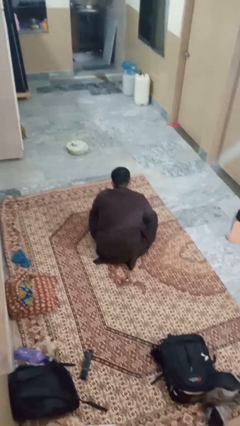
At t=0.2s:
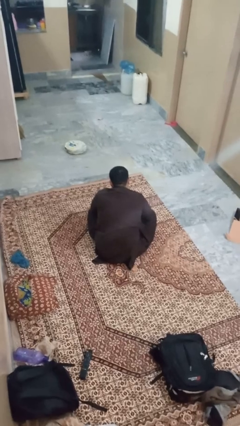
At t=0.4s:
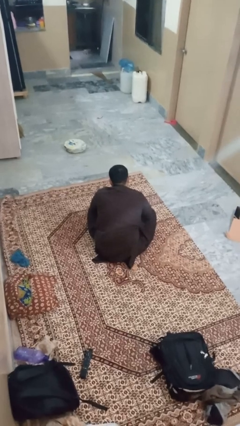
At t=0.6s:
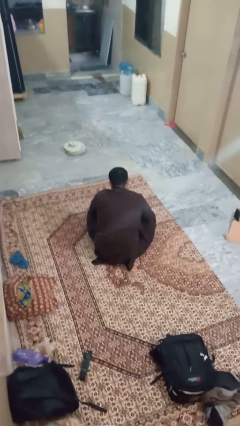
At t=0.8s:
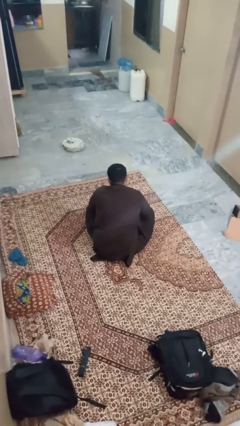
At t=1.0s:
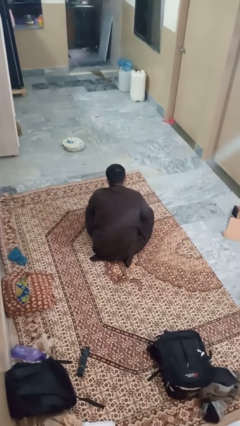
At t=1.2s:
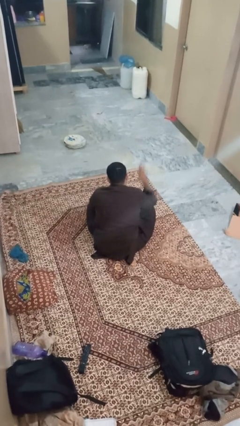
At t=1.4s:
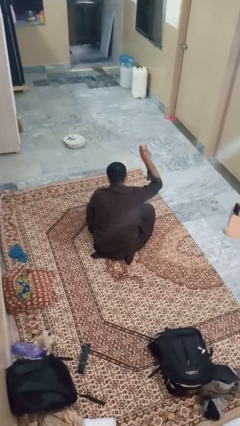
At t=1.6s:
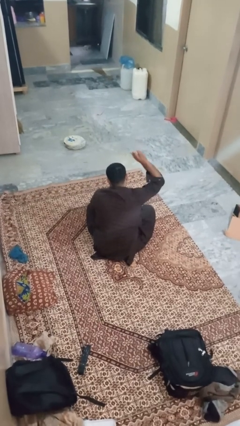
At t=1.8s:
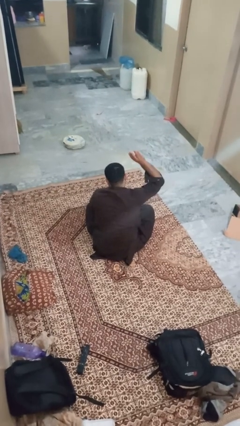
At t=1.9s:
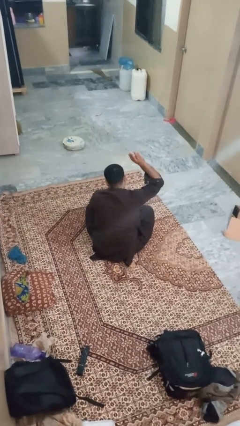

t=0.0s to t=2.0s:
person gestures number three

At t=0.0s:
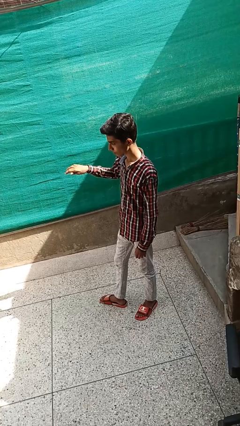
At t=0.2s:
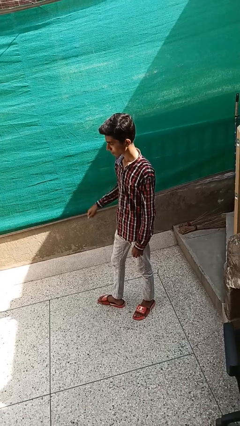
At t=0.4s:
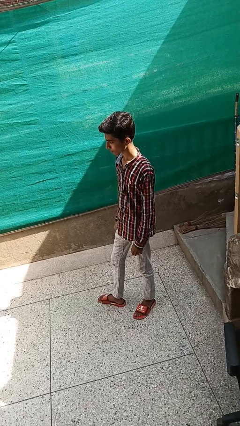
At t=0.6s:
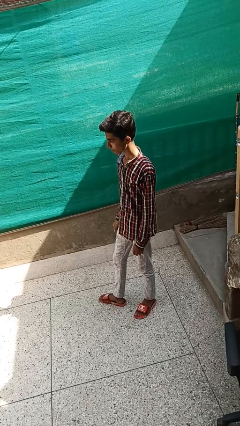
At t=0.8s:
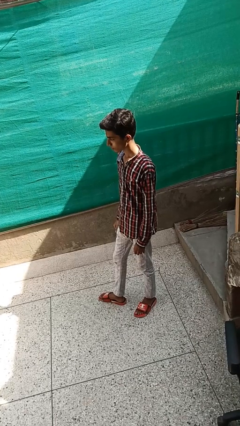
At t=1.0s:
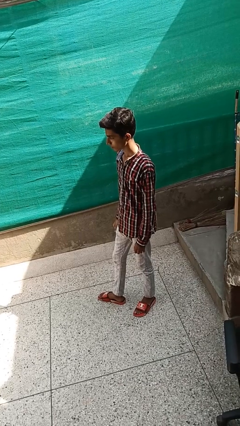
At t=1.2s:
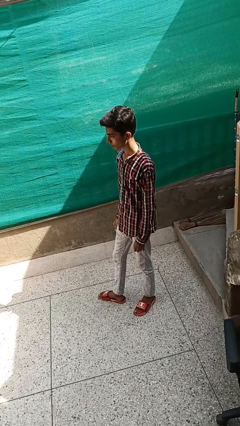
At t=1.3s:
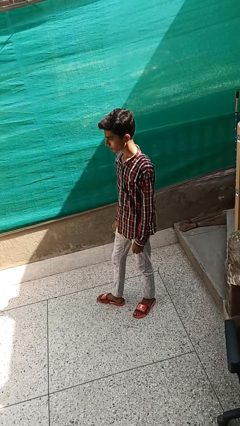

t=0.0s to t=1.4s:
person gestures swipe left

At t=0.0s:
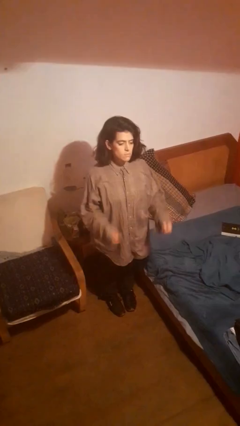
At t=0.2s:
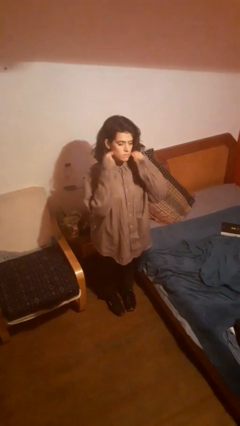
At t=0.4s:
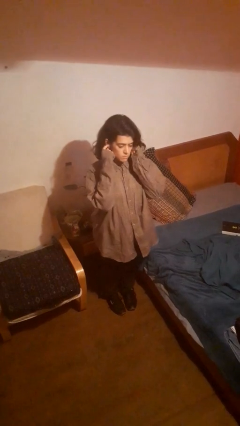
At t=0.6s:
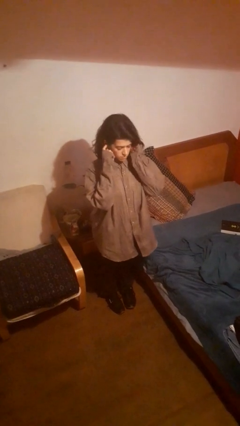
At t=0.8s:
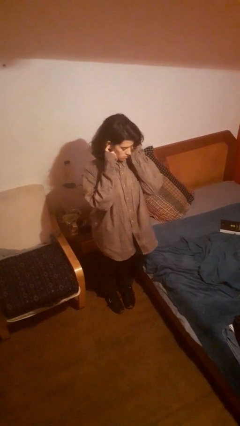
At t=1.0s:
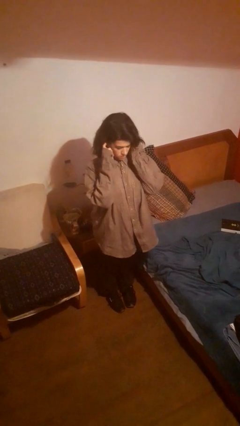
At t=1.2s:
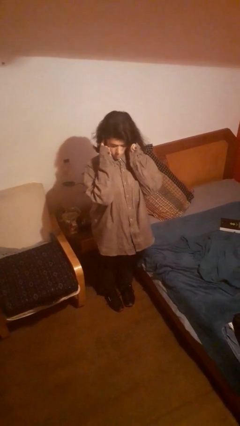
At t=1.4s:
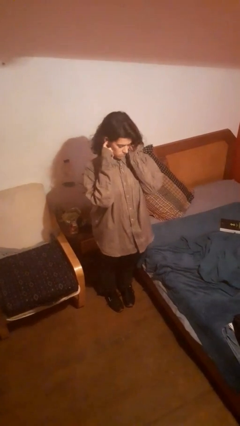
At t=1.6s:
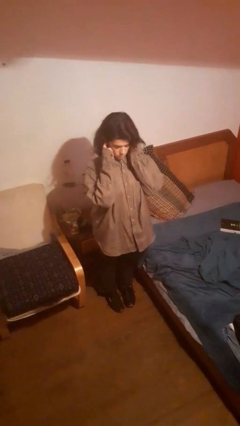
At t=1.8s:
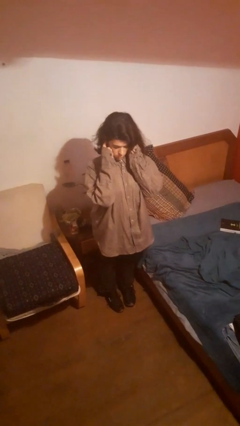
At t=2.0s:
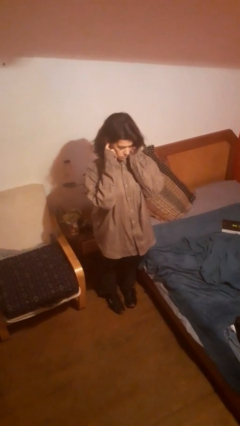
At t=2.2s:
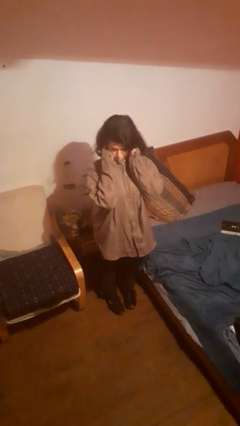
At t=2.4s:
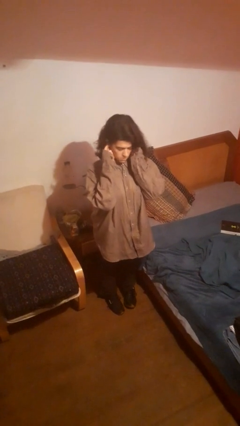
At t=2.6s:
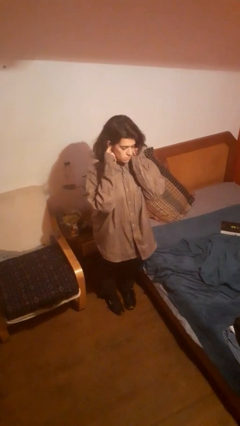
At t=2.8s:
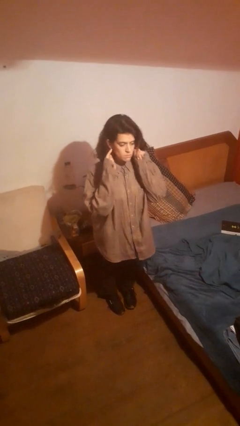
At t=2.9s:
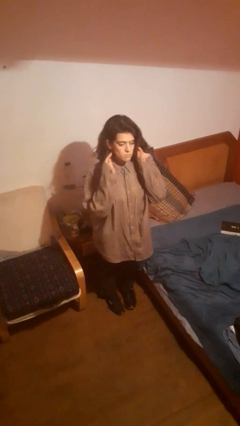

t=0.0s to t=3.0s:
person puts fingers in ear

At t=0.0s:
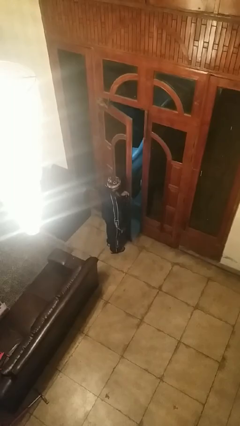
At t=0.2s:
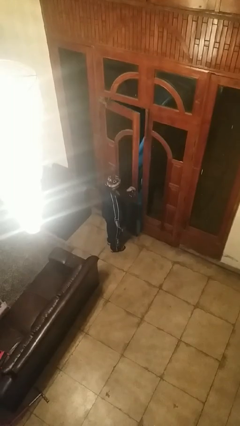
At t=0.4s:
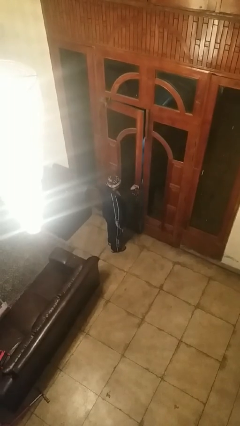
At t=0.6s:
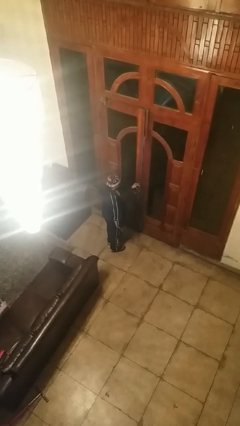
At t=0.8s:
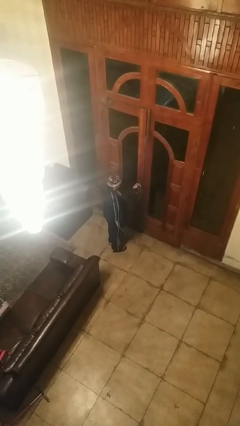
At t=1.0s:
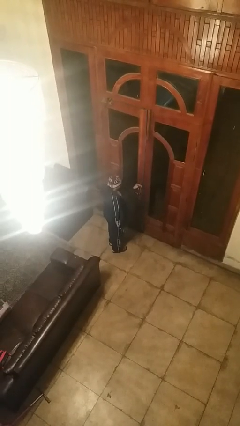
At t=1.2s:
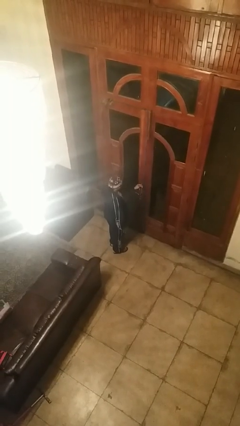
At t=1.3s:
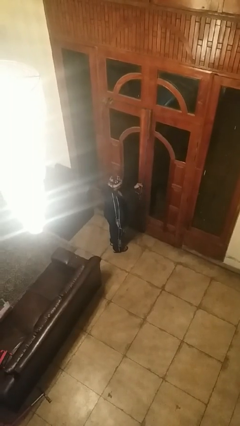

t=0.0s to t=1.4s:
person closes facility door

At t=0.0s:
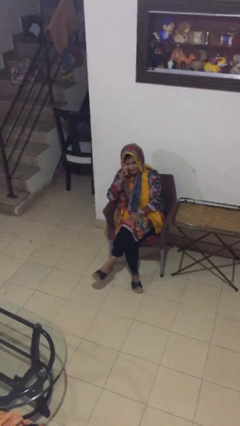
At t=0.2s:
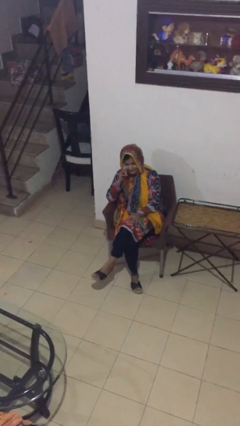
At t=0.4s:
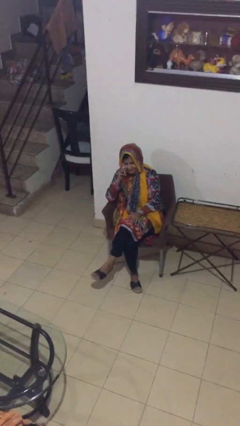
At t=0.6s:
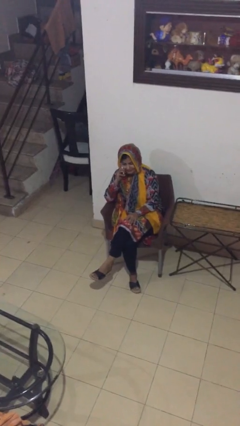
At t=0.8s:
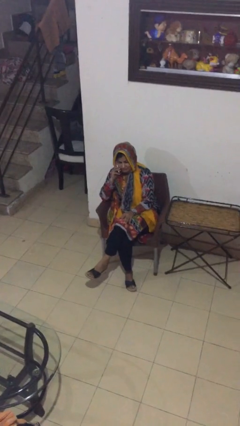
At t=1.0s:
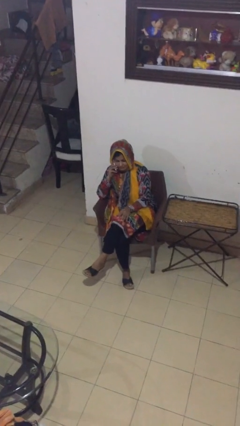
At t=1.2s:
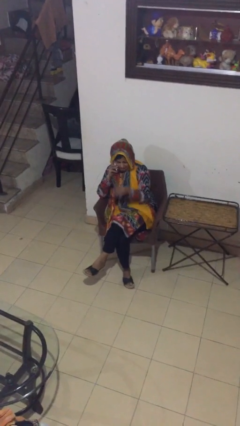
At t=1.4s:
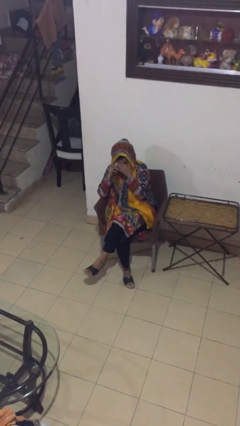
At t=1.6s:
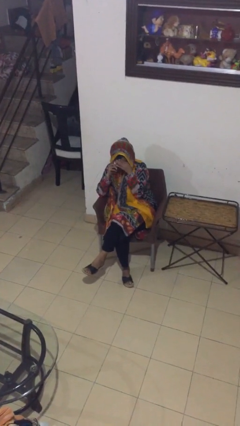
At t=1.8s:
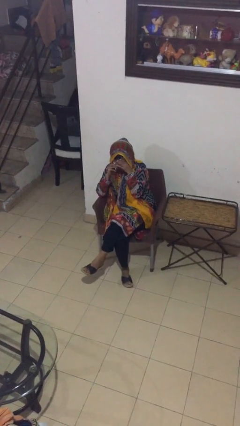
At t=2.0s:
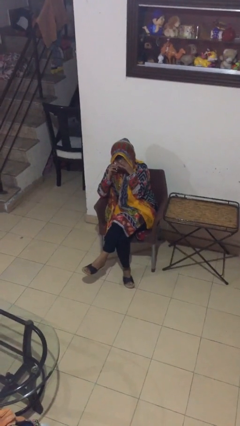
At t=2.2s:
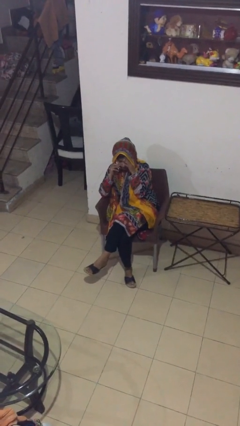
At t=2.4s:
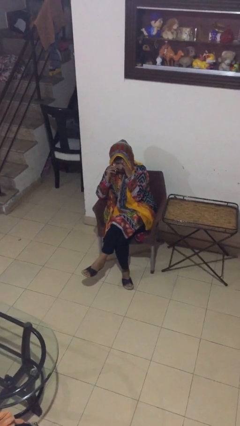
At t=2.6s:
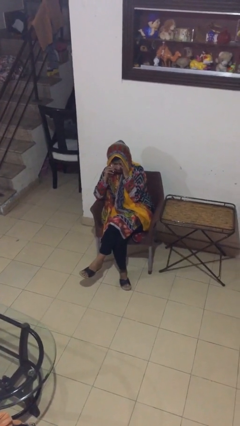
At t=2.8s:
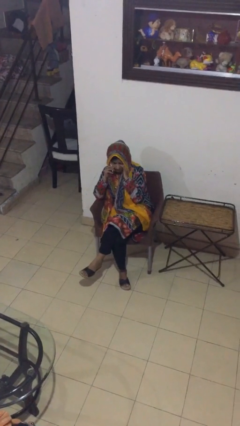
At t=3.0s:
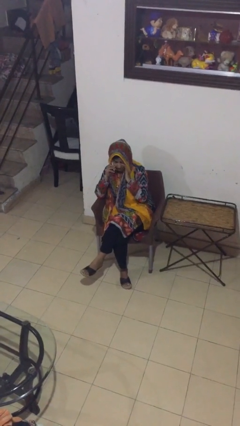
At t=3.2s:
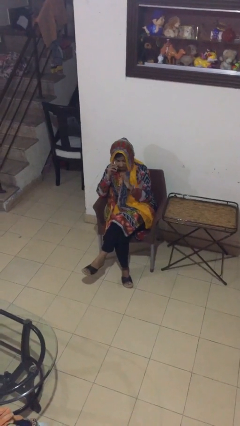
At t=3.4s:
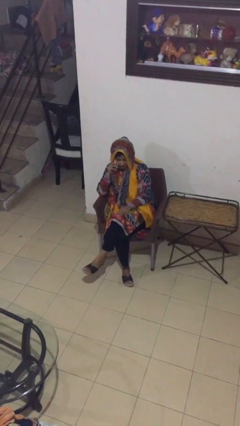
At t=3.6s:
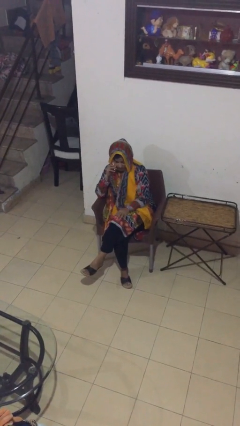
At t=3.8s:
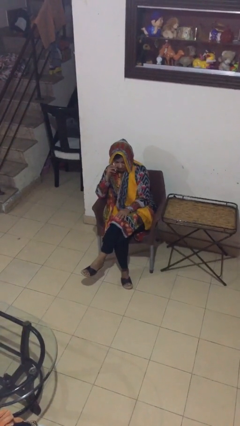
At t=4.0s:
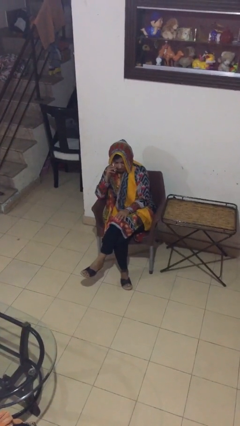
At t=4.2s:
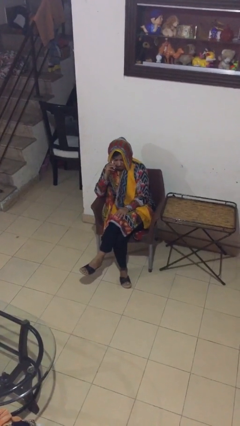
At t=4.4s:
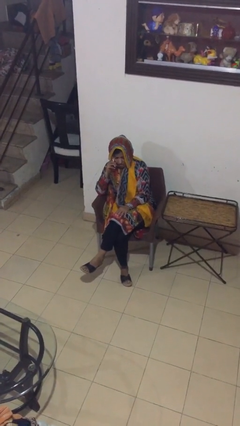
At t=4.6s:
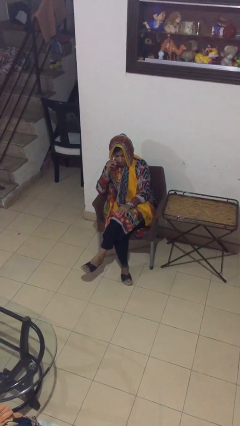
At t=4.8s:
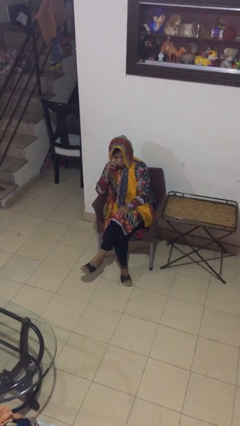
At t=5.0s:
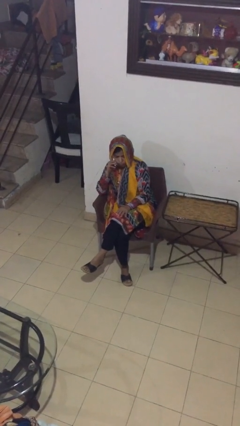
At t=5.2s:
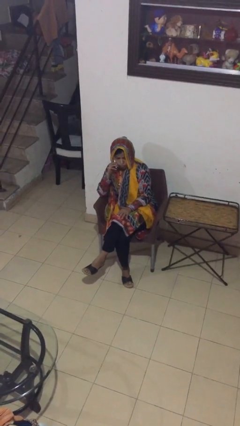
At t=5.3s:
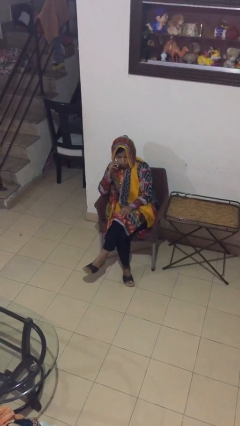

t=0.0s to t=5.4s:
person talks on phone

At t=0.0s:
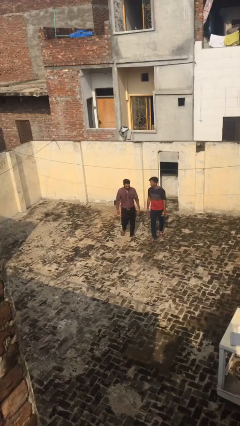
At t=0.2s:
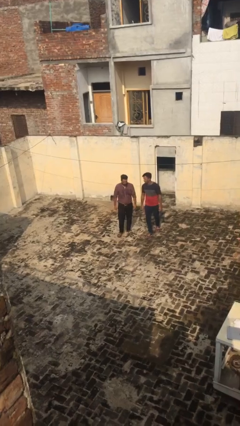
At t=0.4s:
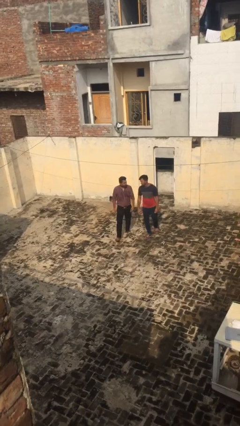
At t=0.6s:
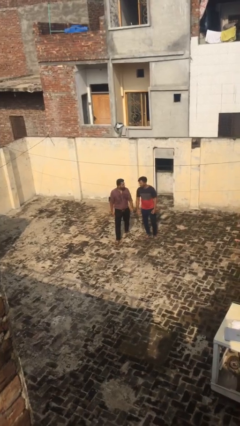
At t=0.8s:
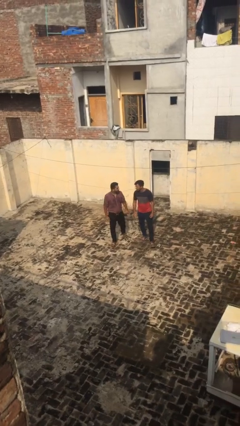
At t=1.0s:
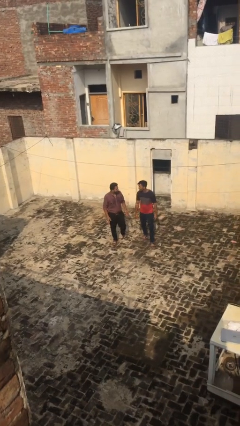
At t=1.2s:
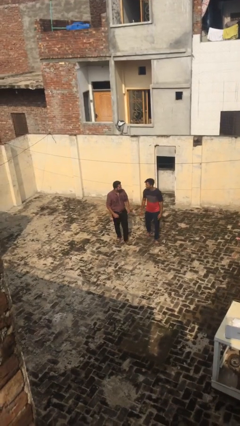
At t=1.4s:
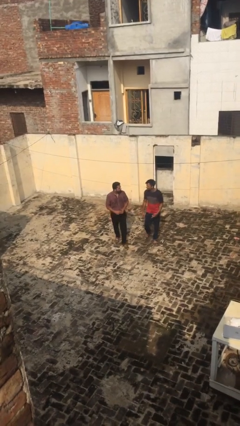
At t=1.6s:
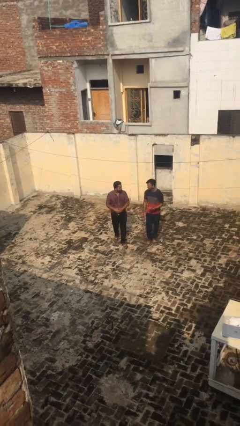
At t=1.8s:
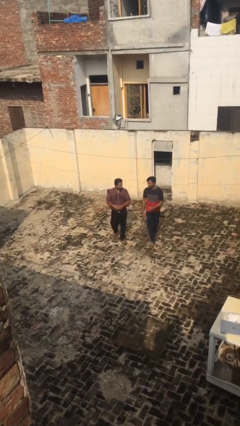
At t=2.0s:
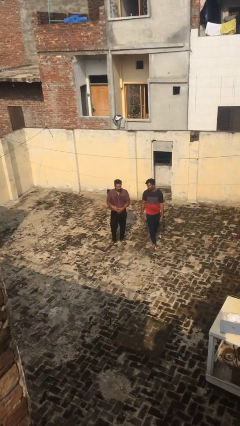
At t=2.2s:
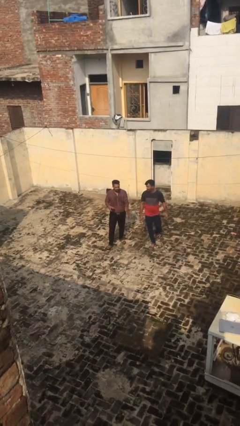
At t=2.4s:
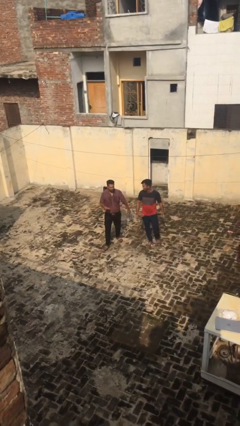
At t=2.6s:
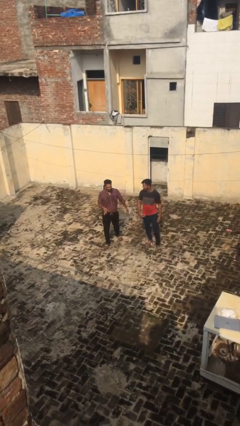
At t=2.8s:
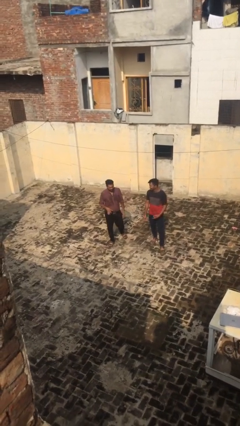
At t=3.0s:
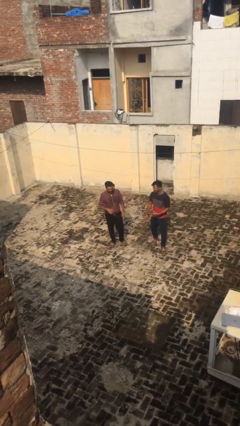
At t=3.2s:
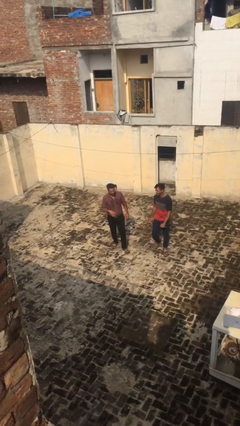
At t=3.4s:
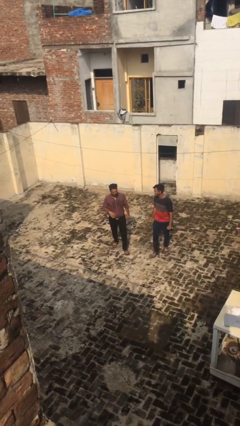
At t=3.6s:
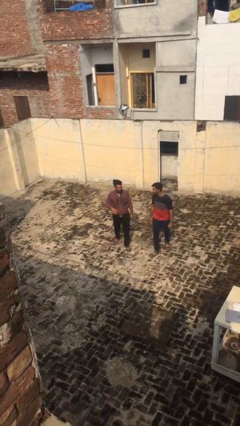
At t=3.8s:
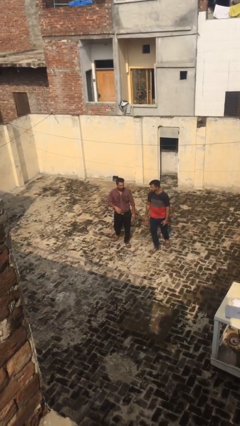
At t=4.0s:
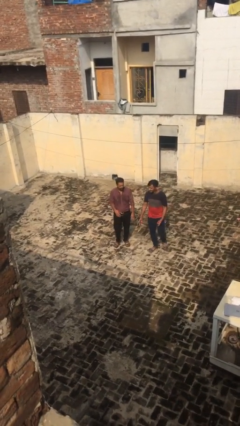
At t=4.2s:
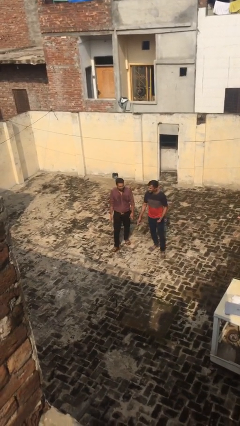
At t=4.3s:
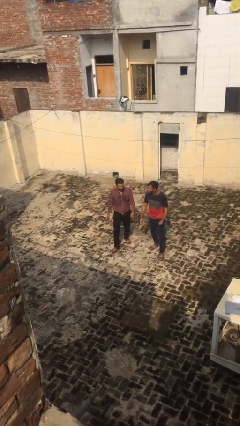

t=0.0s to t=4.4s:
person talks to person
